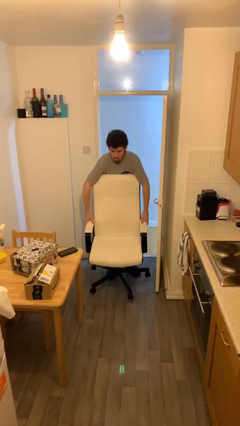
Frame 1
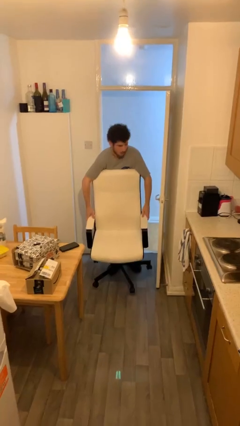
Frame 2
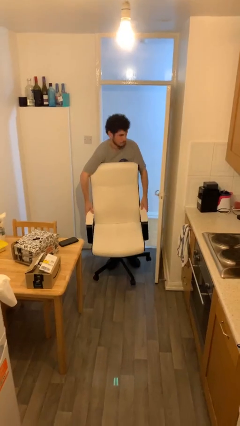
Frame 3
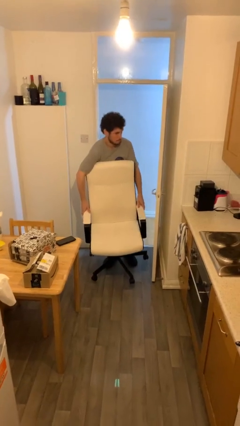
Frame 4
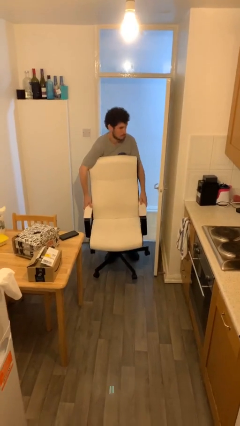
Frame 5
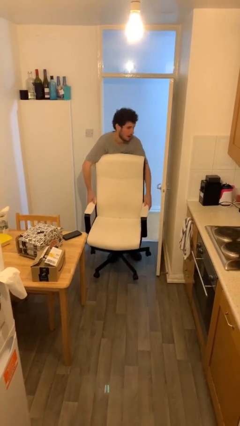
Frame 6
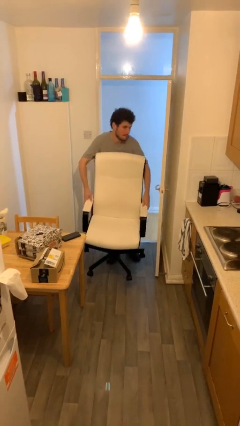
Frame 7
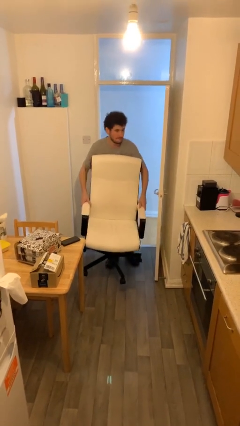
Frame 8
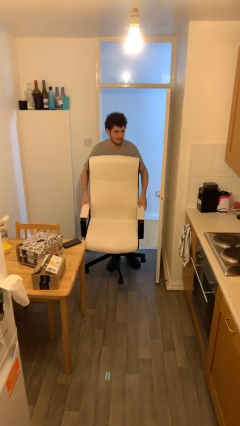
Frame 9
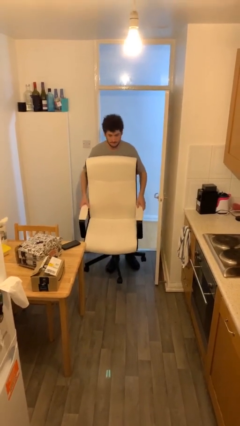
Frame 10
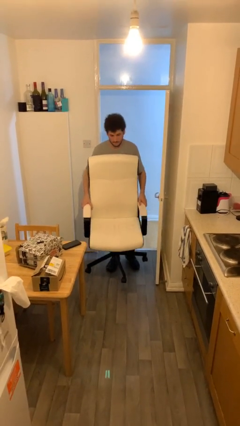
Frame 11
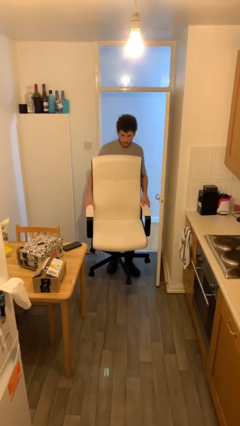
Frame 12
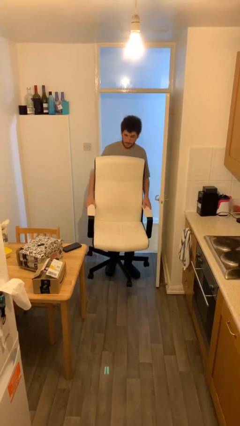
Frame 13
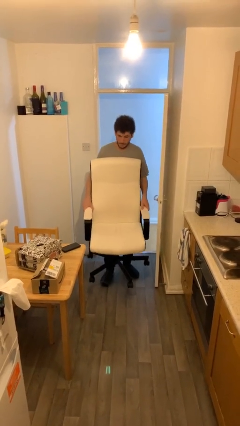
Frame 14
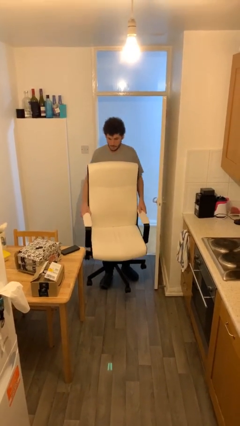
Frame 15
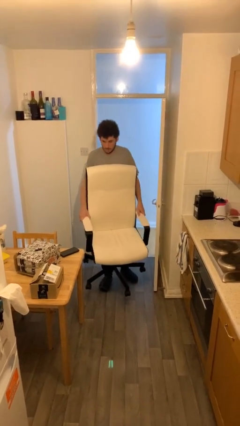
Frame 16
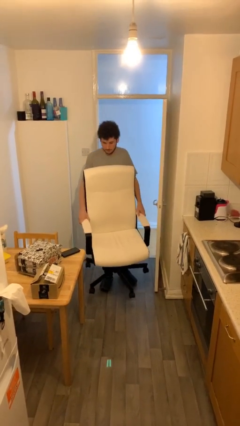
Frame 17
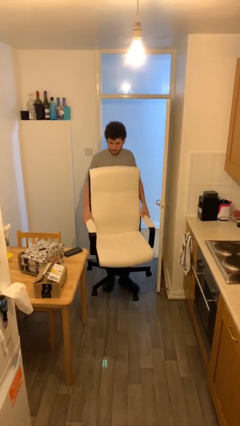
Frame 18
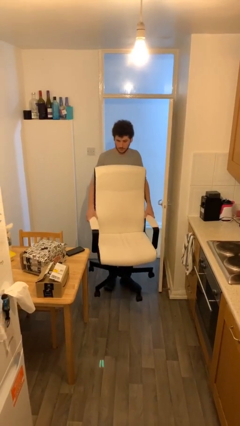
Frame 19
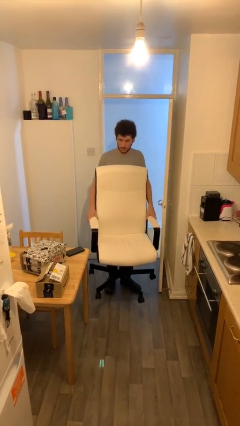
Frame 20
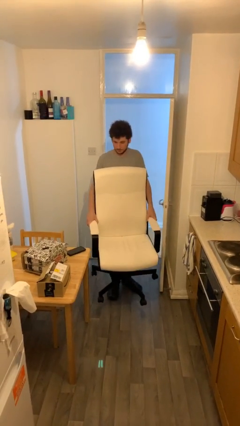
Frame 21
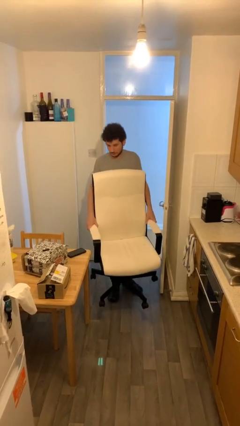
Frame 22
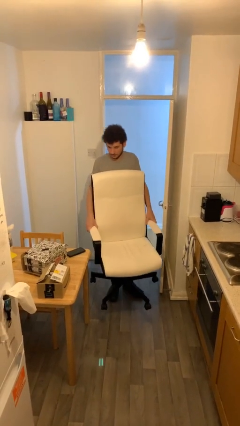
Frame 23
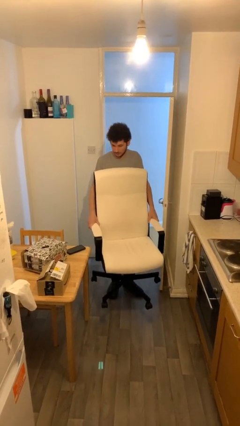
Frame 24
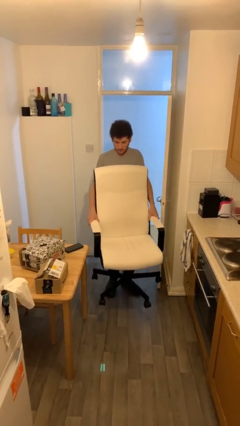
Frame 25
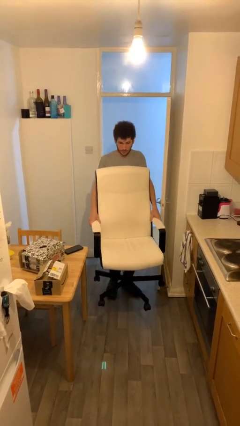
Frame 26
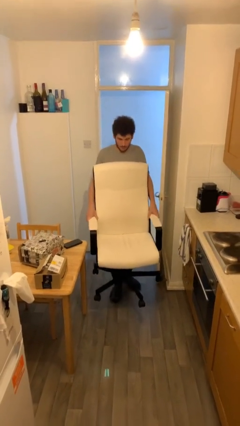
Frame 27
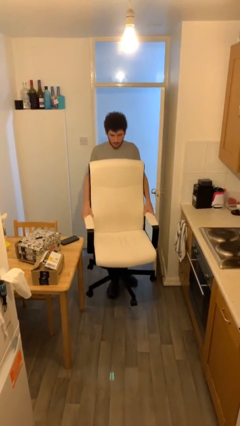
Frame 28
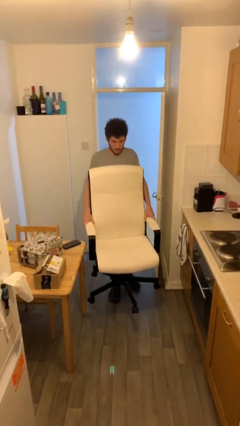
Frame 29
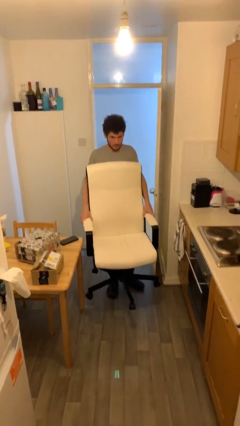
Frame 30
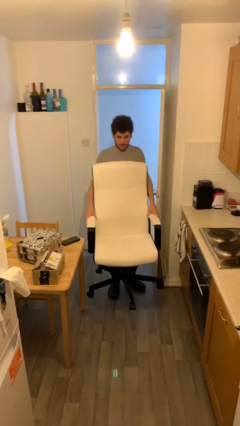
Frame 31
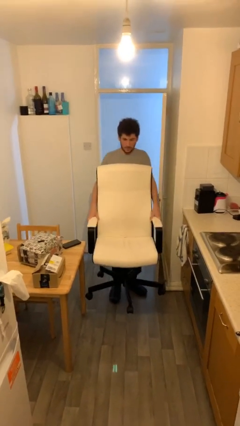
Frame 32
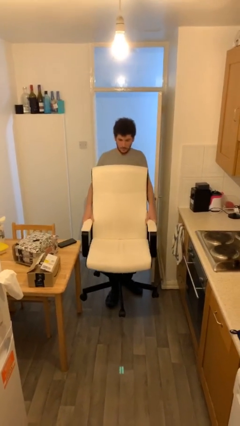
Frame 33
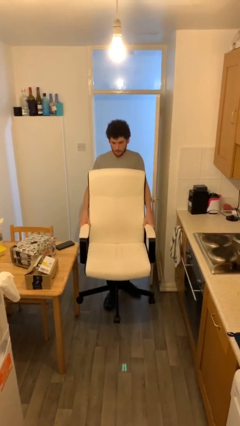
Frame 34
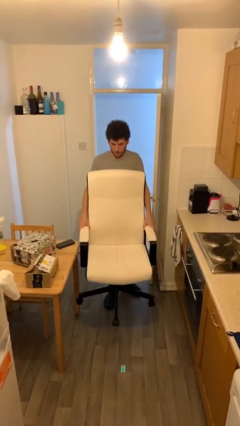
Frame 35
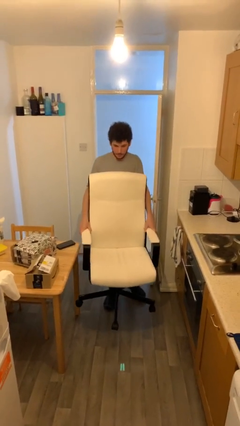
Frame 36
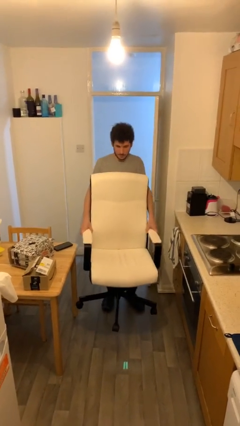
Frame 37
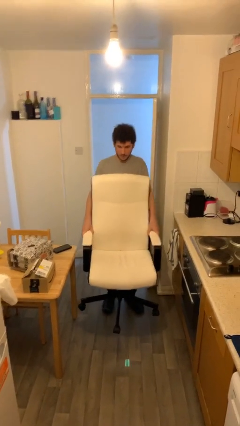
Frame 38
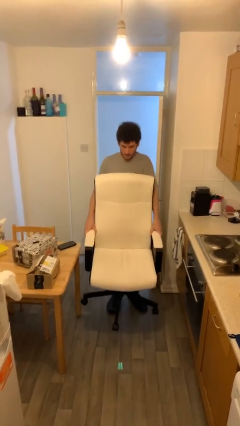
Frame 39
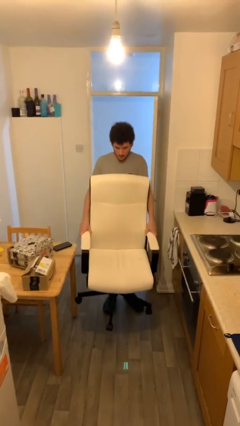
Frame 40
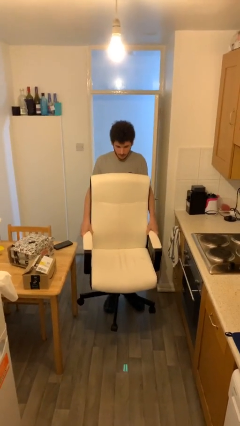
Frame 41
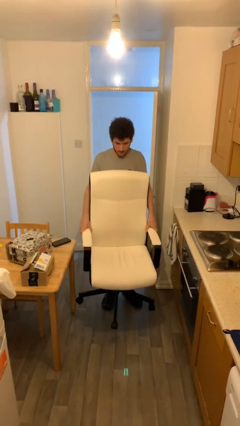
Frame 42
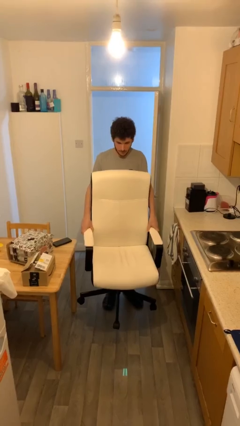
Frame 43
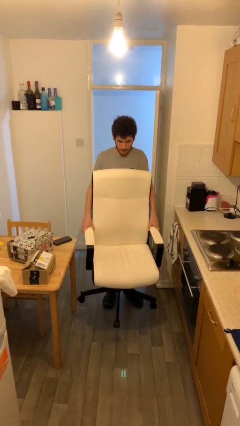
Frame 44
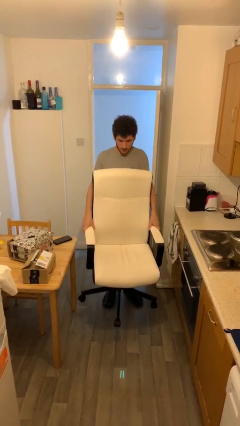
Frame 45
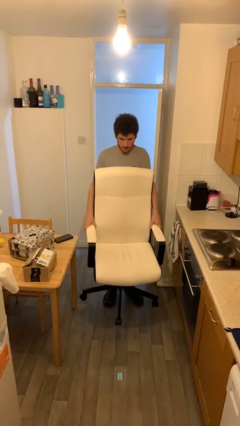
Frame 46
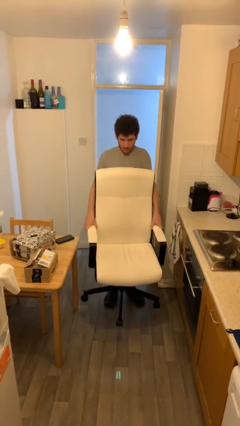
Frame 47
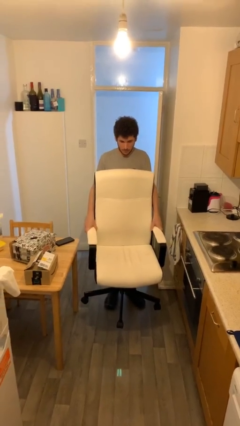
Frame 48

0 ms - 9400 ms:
person carries heavy object

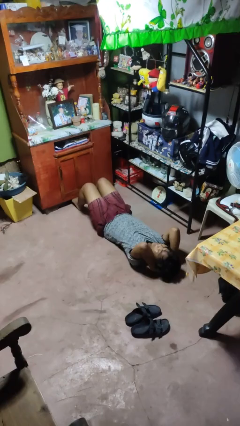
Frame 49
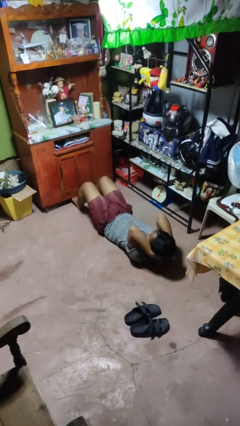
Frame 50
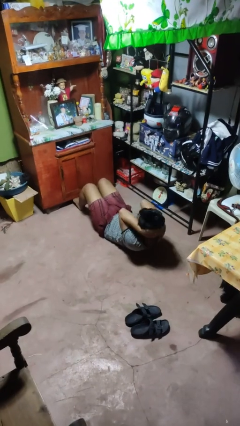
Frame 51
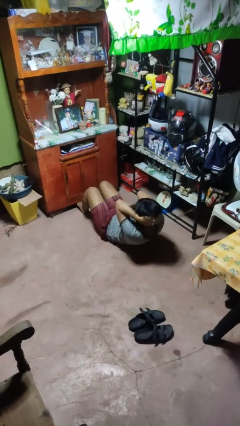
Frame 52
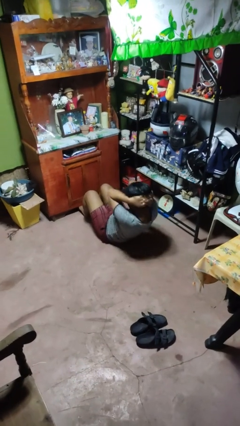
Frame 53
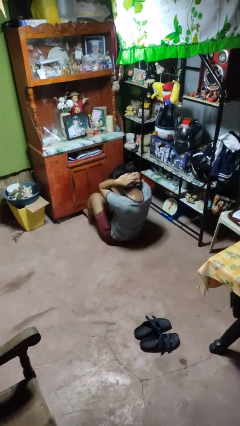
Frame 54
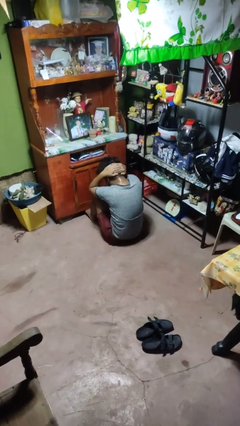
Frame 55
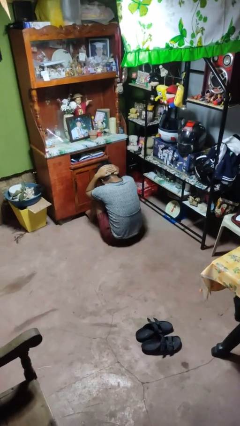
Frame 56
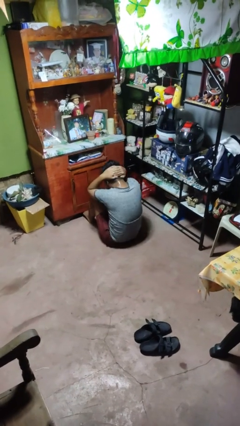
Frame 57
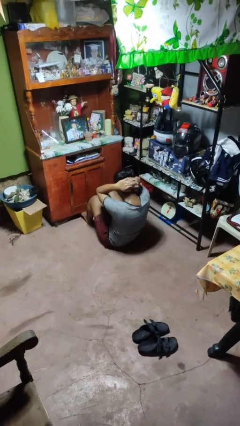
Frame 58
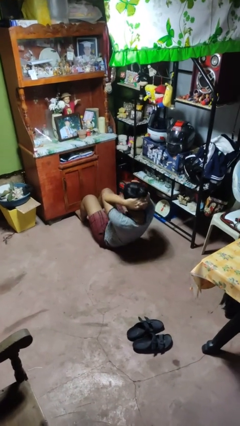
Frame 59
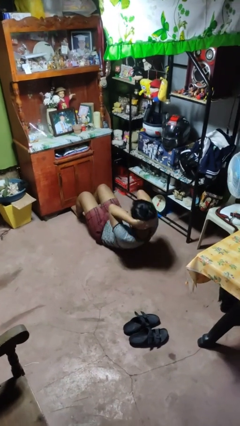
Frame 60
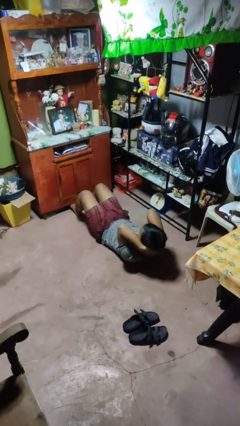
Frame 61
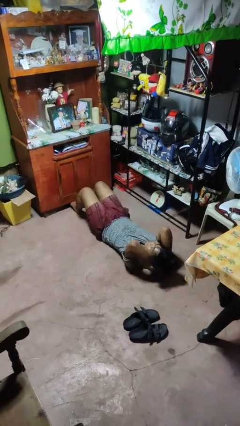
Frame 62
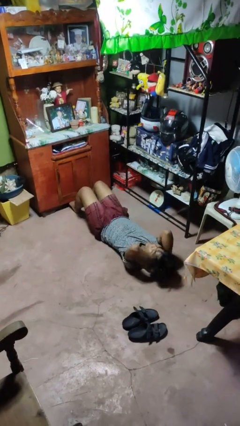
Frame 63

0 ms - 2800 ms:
person exercises with situp

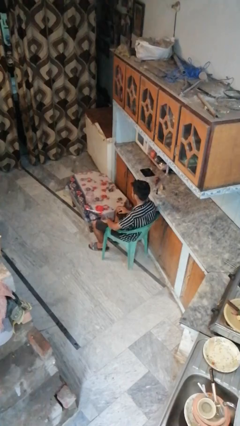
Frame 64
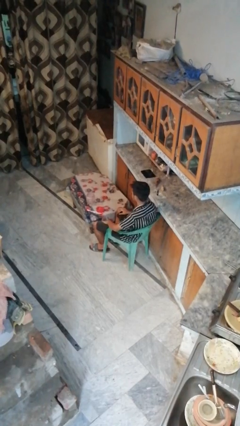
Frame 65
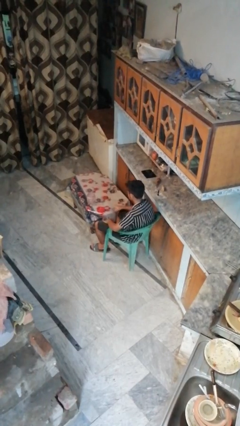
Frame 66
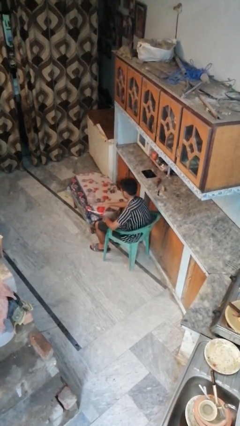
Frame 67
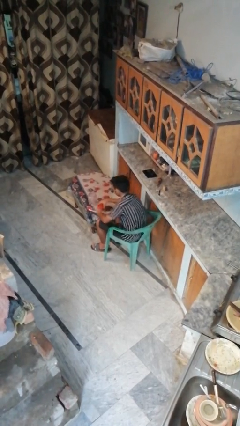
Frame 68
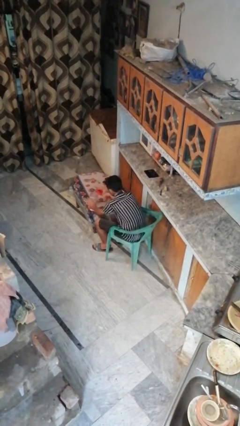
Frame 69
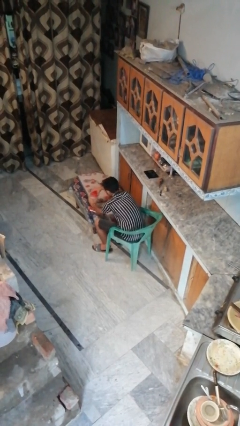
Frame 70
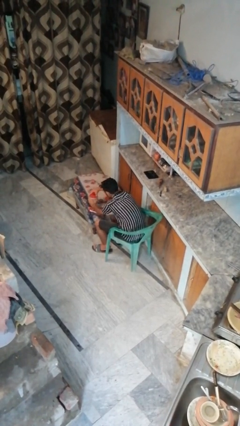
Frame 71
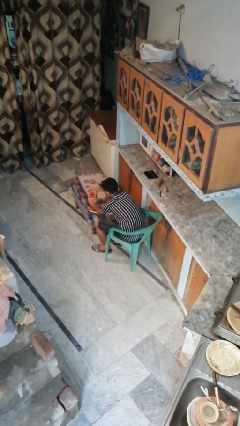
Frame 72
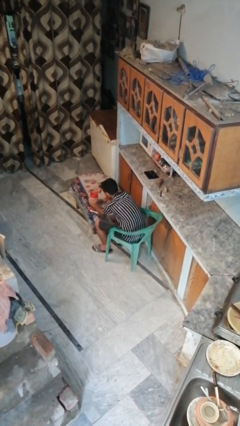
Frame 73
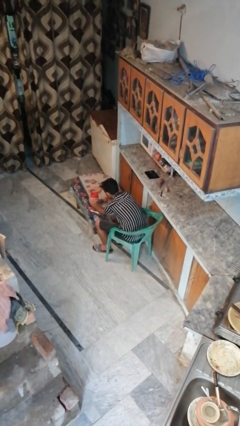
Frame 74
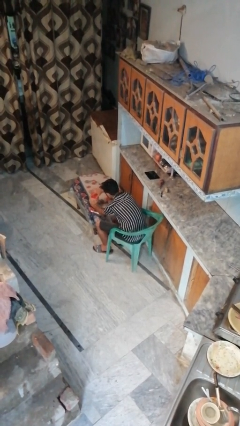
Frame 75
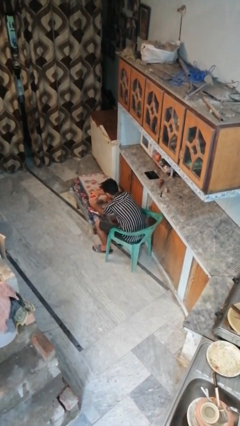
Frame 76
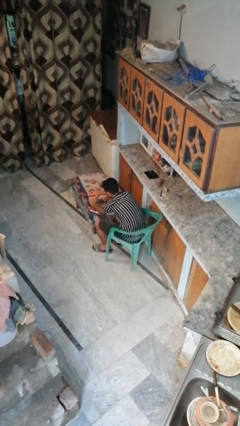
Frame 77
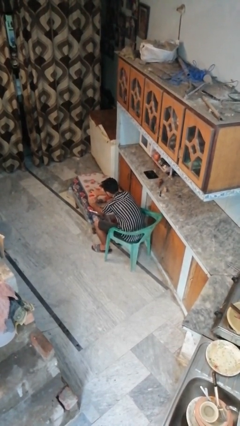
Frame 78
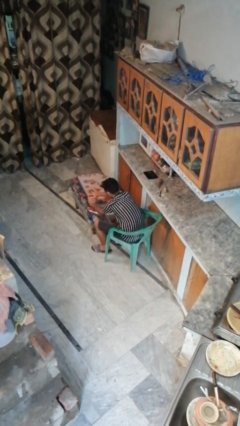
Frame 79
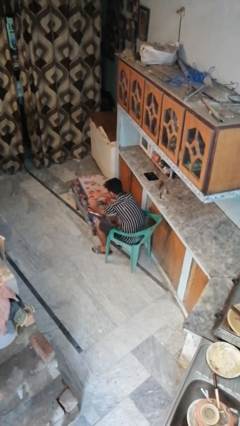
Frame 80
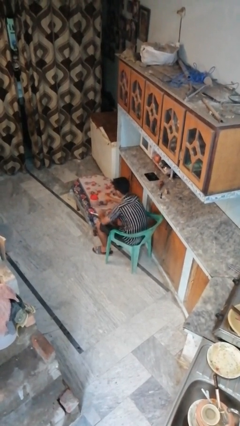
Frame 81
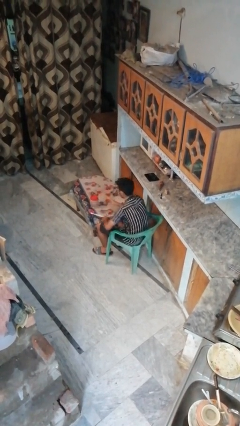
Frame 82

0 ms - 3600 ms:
person closes jar

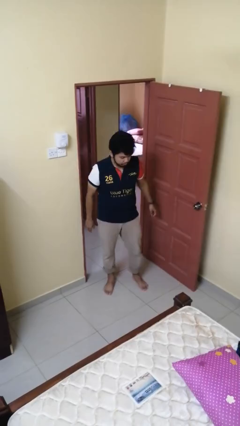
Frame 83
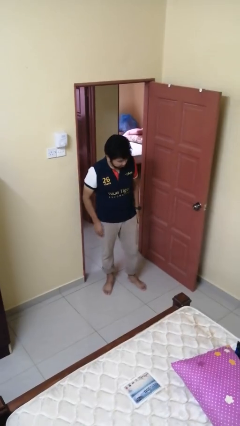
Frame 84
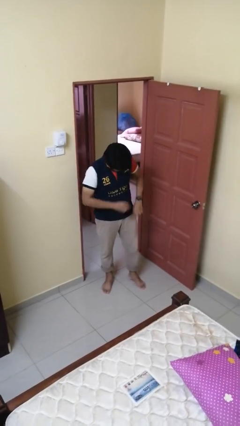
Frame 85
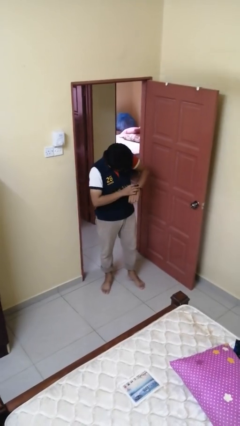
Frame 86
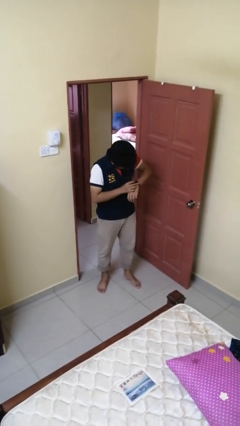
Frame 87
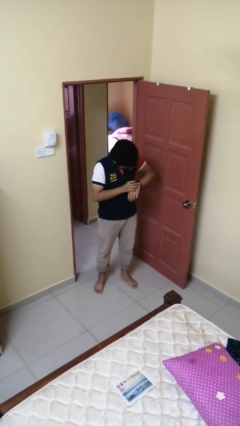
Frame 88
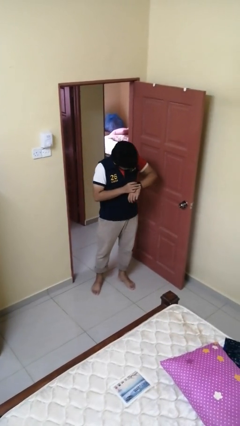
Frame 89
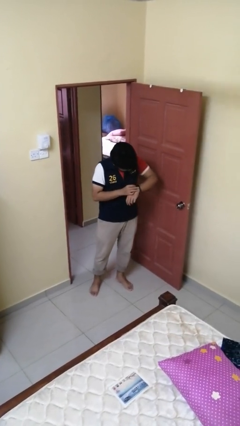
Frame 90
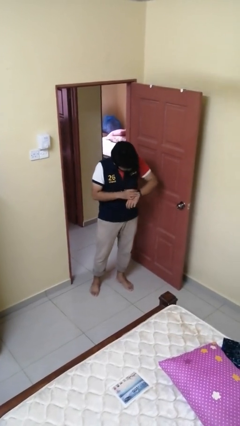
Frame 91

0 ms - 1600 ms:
person looks at wristwatch

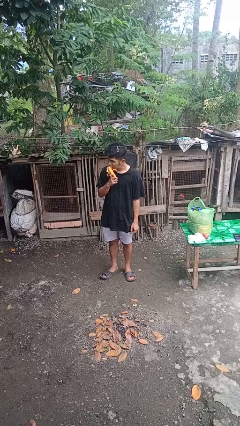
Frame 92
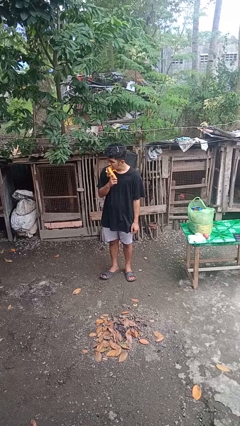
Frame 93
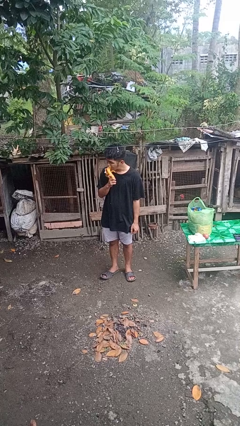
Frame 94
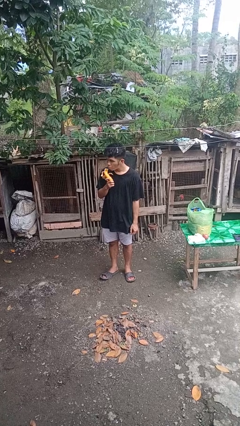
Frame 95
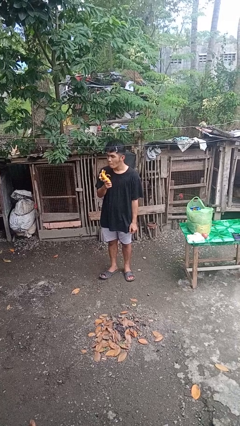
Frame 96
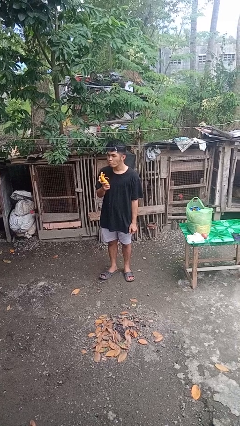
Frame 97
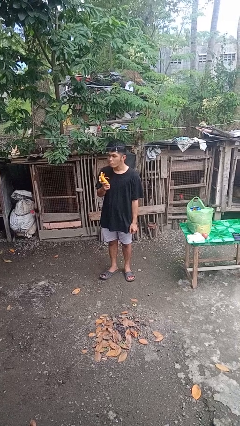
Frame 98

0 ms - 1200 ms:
person eats banana
